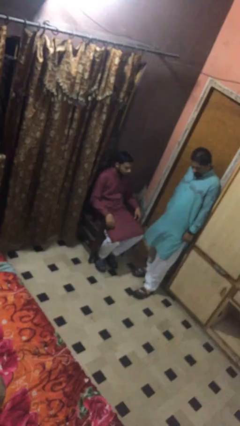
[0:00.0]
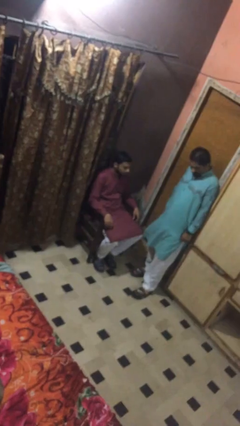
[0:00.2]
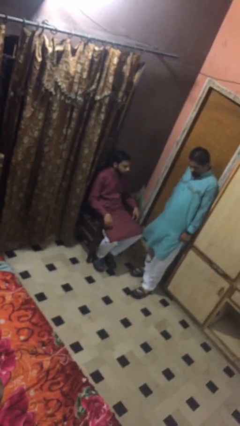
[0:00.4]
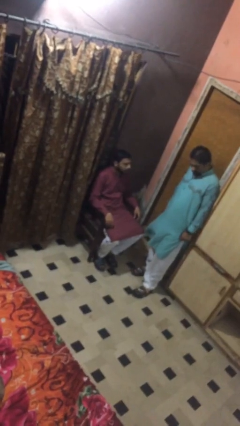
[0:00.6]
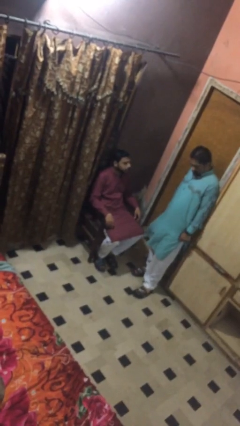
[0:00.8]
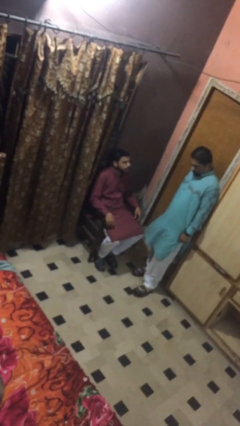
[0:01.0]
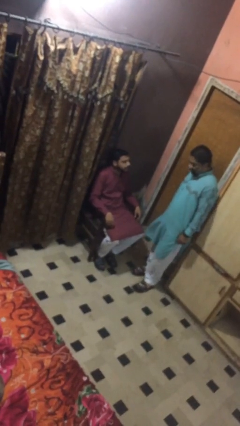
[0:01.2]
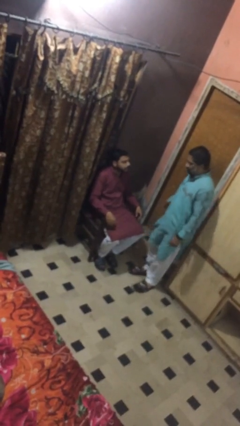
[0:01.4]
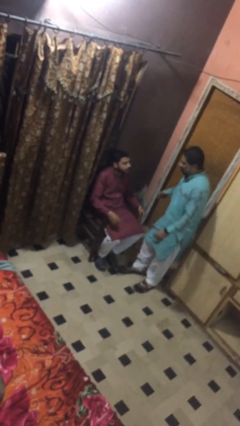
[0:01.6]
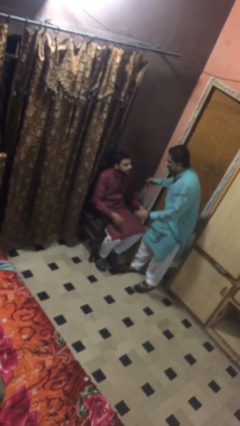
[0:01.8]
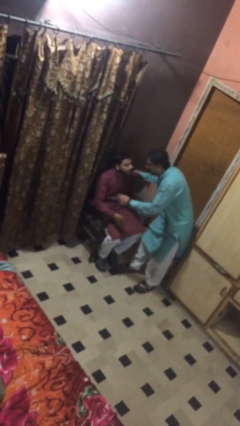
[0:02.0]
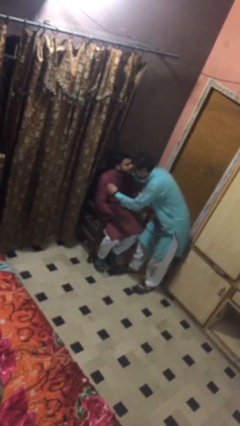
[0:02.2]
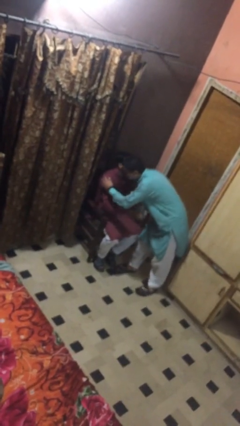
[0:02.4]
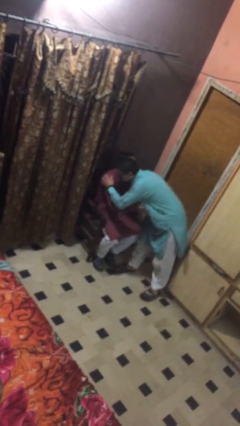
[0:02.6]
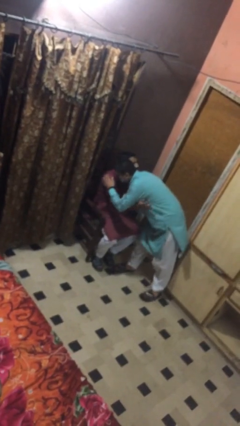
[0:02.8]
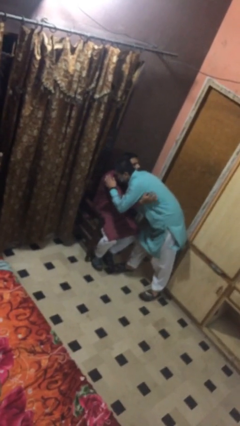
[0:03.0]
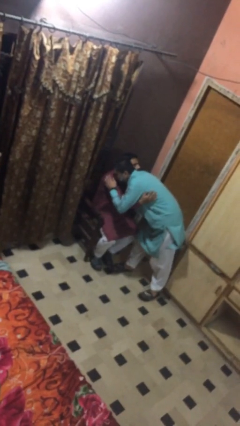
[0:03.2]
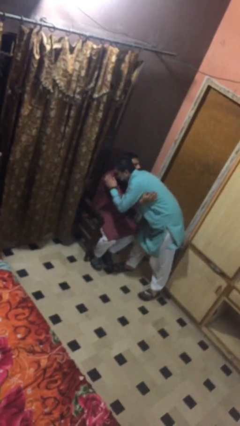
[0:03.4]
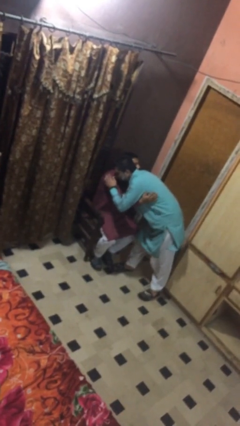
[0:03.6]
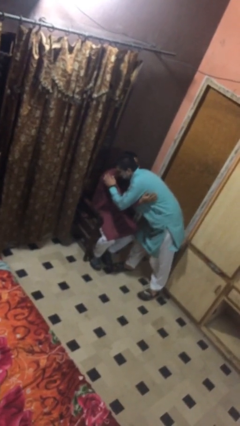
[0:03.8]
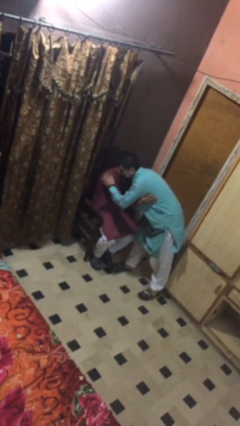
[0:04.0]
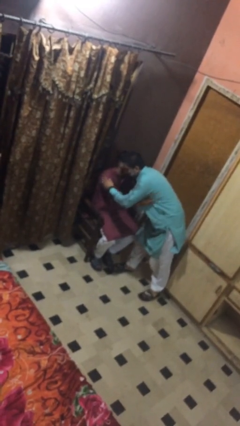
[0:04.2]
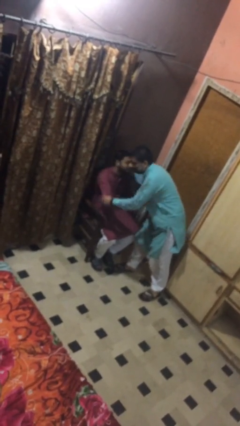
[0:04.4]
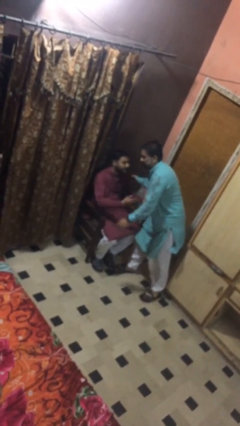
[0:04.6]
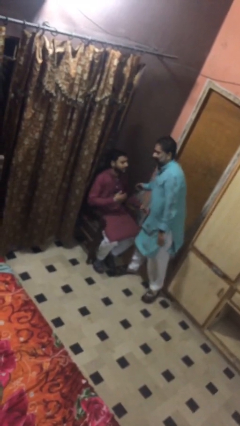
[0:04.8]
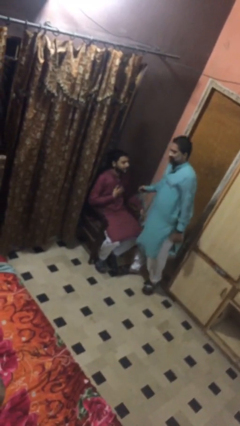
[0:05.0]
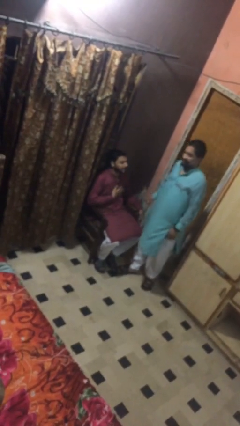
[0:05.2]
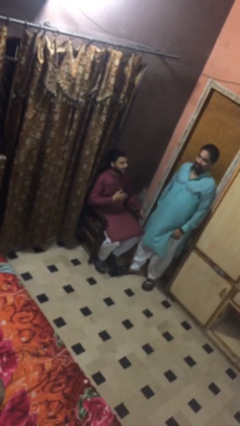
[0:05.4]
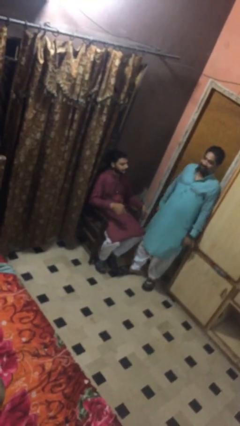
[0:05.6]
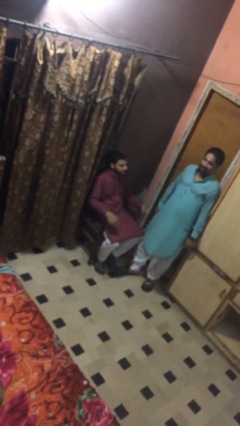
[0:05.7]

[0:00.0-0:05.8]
person embraces person

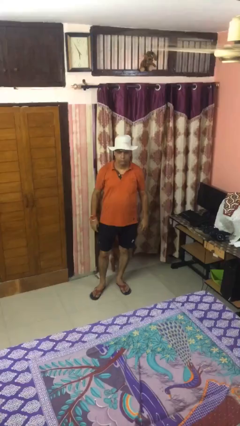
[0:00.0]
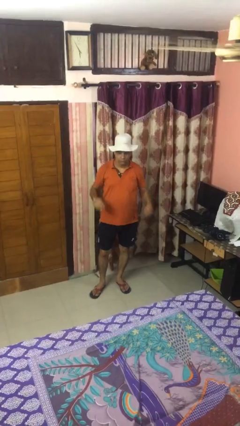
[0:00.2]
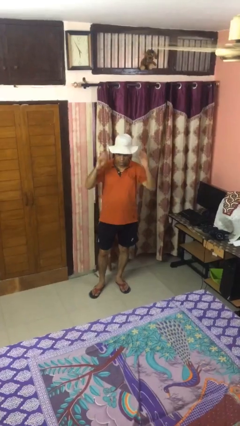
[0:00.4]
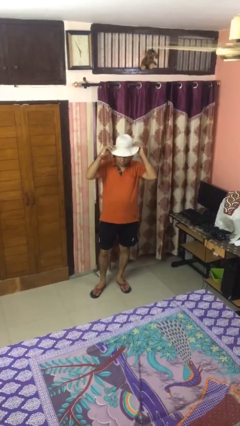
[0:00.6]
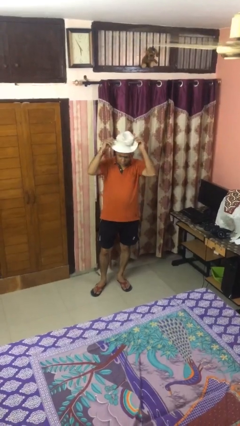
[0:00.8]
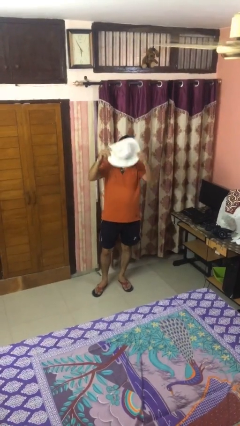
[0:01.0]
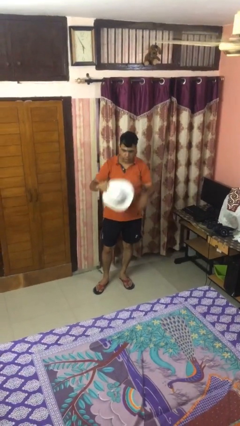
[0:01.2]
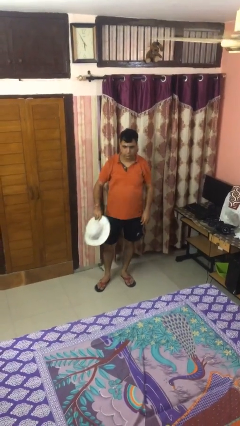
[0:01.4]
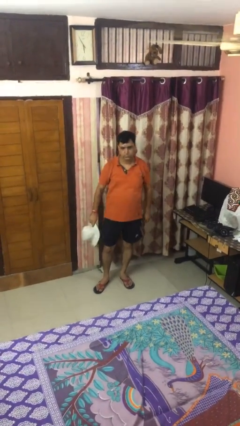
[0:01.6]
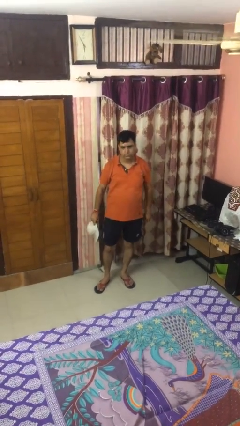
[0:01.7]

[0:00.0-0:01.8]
person takes off hat

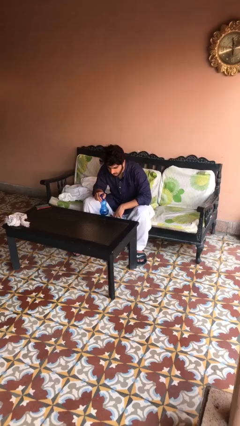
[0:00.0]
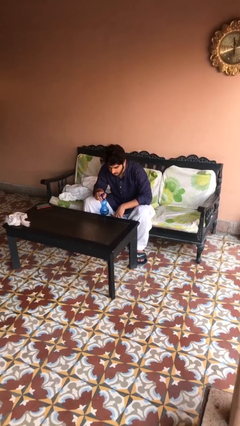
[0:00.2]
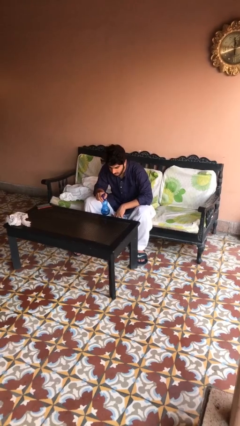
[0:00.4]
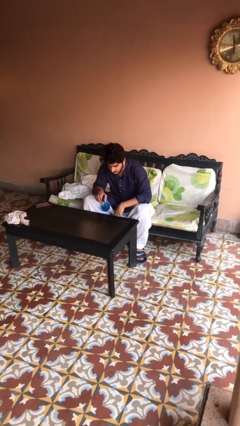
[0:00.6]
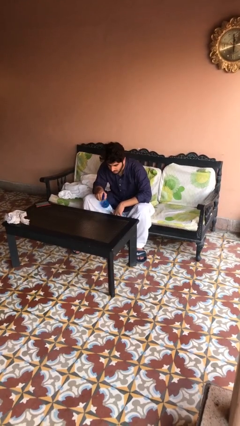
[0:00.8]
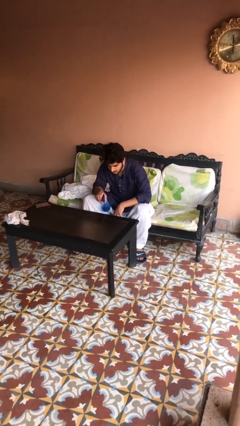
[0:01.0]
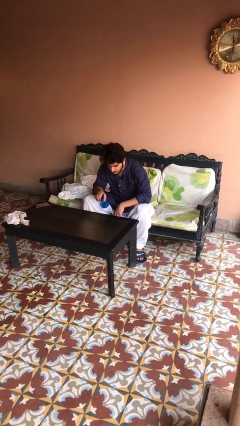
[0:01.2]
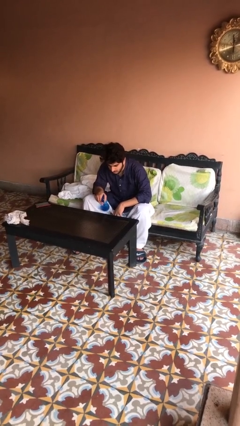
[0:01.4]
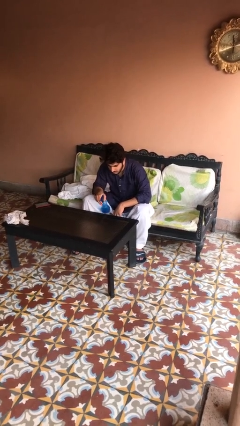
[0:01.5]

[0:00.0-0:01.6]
person sprays from bottle

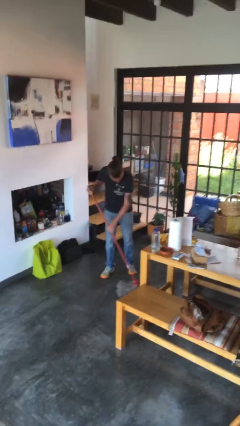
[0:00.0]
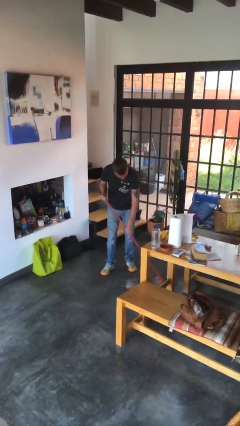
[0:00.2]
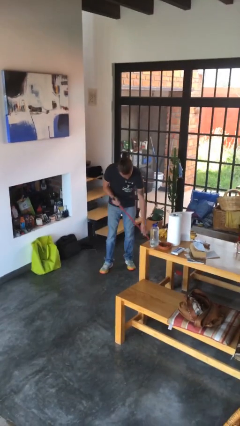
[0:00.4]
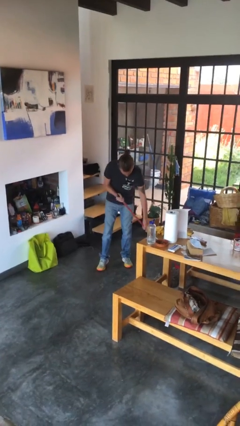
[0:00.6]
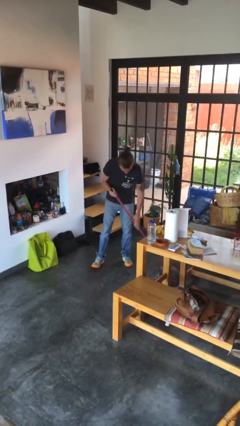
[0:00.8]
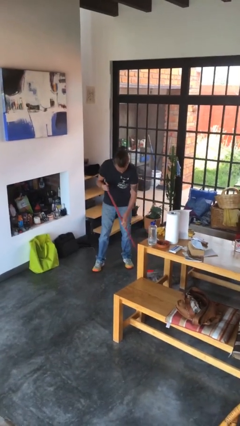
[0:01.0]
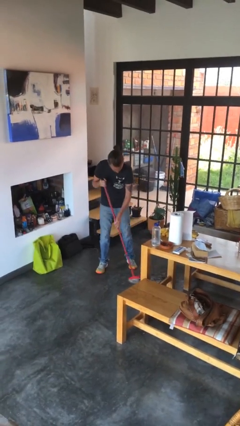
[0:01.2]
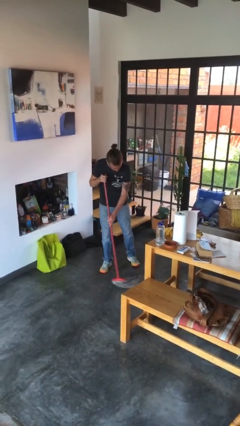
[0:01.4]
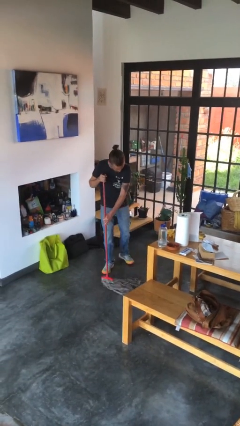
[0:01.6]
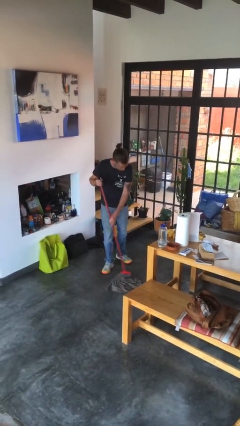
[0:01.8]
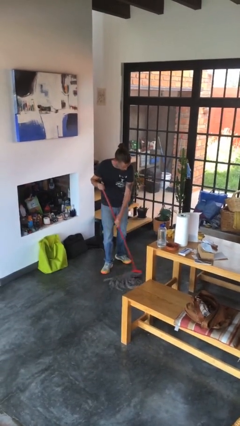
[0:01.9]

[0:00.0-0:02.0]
person mops

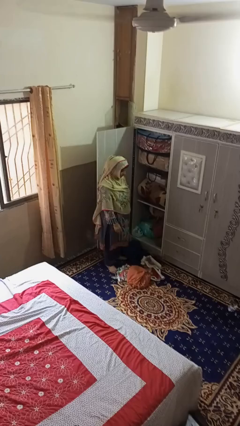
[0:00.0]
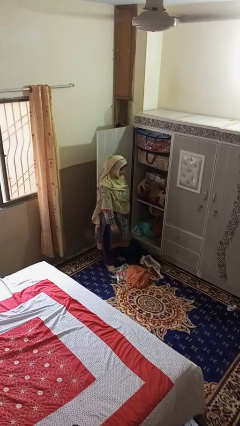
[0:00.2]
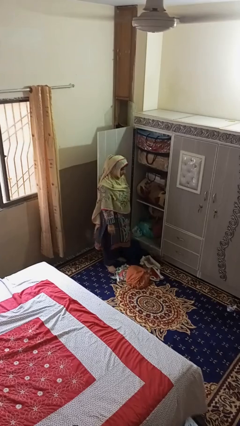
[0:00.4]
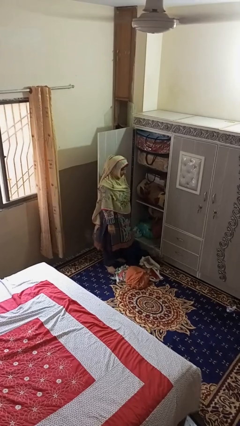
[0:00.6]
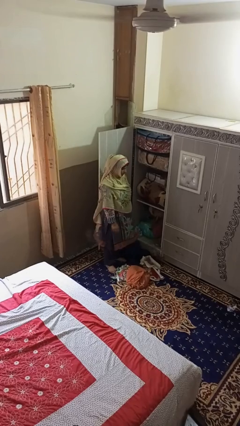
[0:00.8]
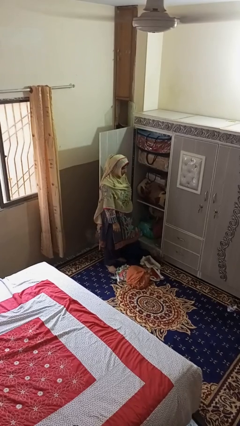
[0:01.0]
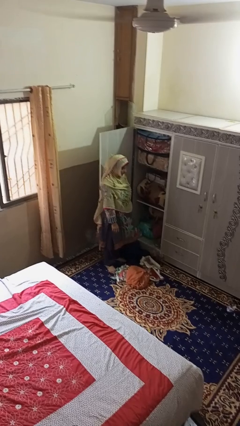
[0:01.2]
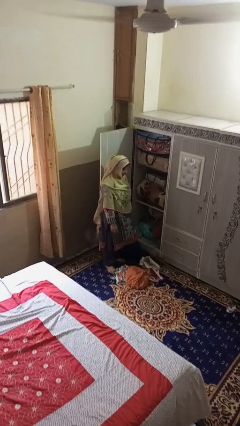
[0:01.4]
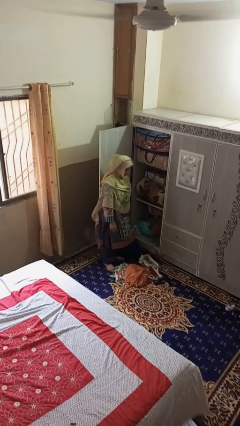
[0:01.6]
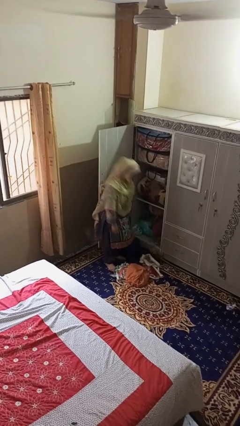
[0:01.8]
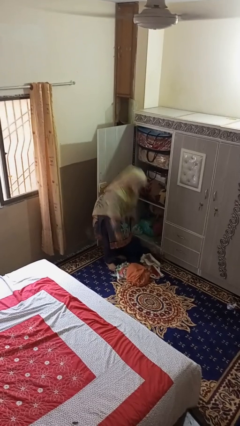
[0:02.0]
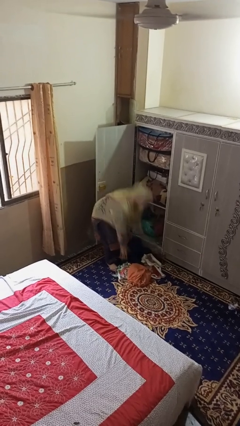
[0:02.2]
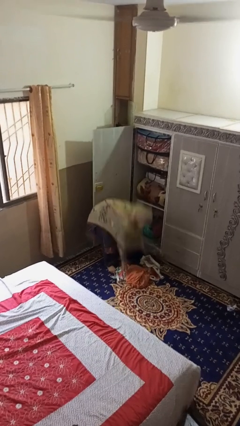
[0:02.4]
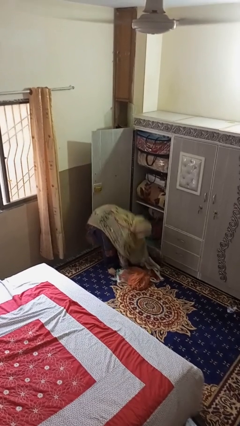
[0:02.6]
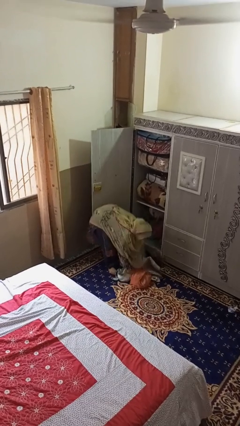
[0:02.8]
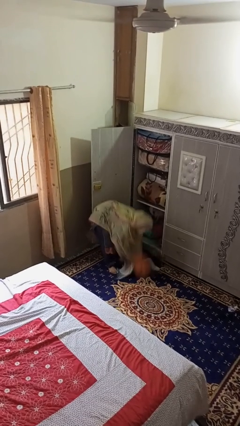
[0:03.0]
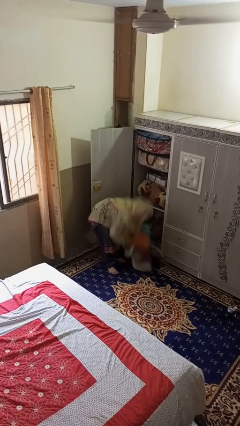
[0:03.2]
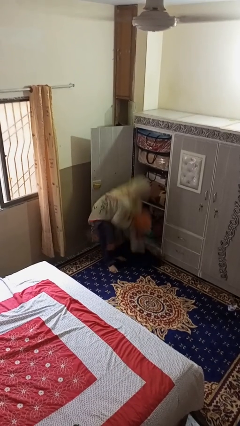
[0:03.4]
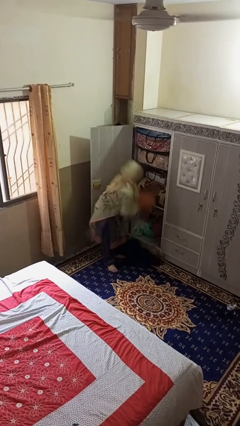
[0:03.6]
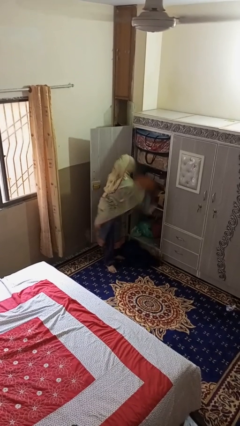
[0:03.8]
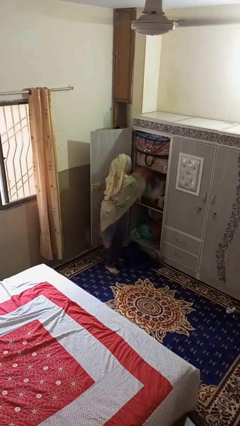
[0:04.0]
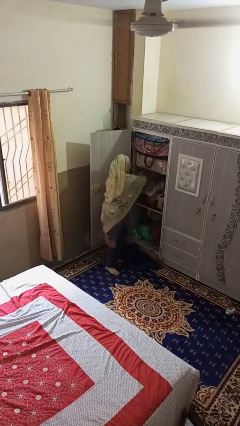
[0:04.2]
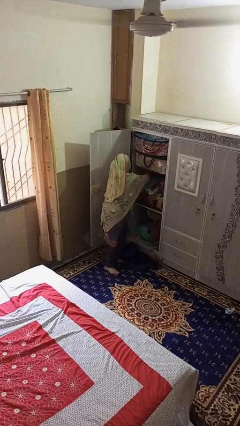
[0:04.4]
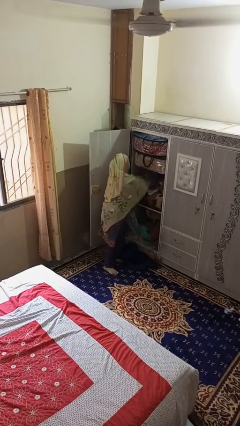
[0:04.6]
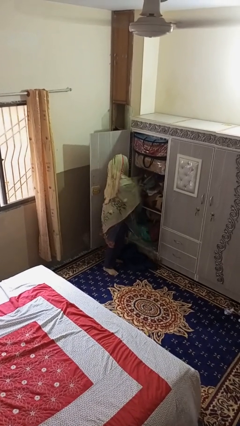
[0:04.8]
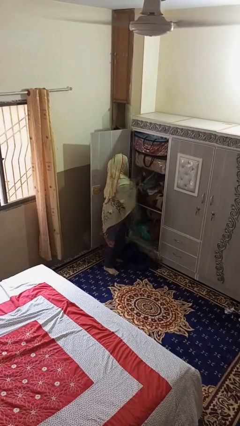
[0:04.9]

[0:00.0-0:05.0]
person takes clothes from dresser

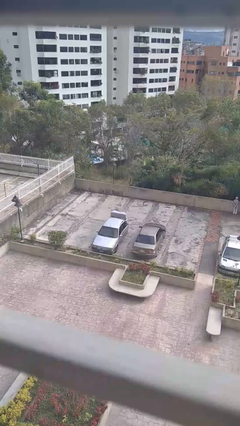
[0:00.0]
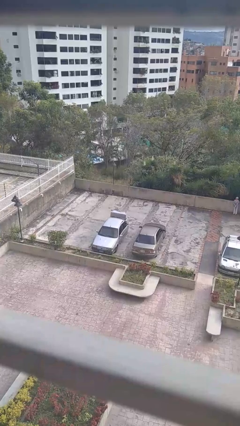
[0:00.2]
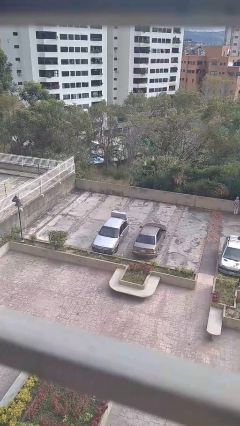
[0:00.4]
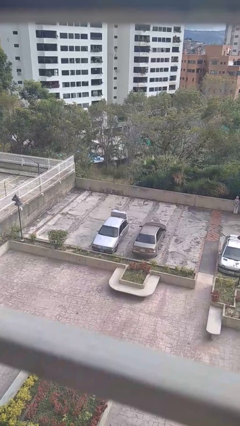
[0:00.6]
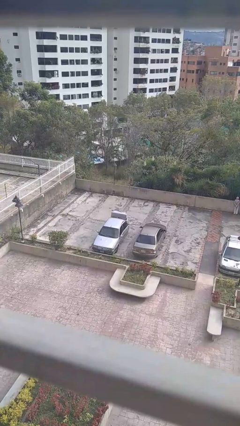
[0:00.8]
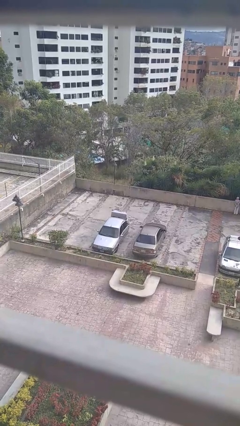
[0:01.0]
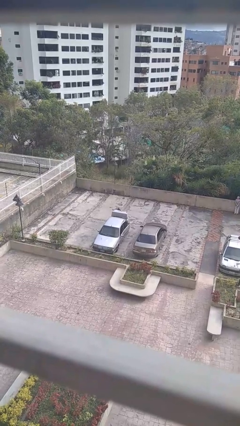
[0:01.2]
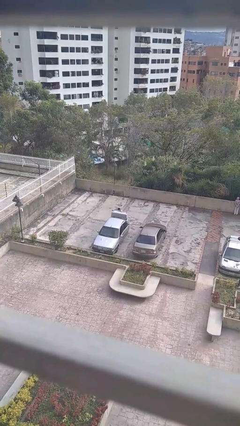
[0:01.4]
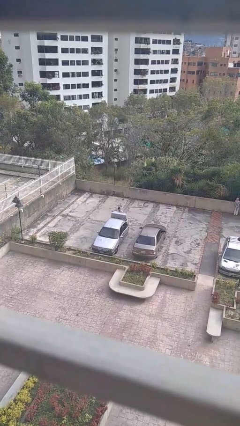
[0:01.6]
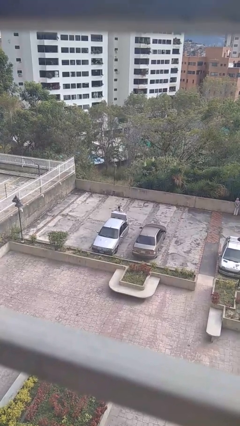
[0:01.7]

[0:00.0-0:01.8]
person unloads car
